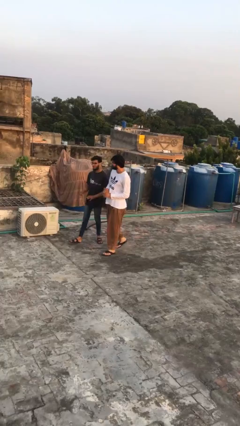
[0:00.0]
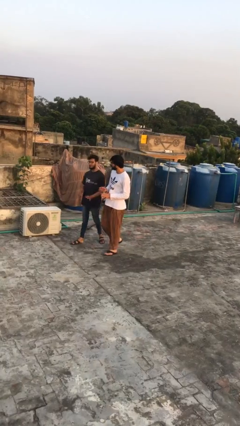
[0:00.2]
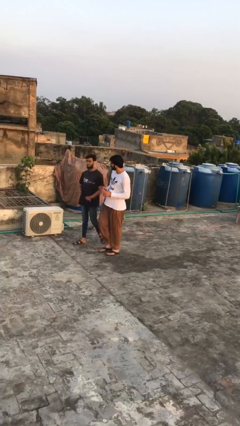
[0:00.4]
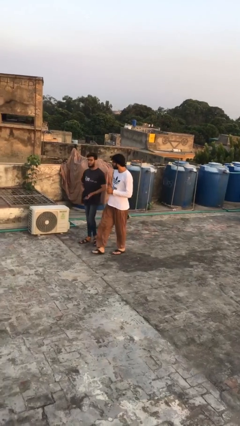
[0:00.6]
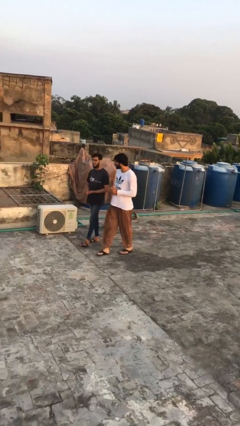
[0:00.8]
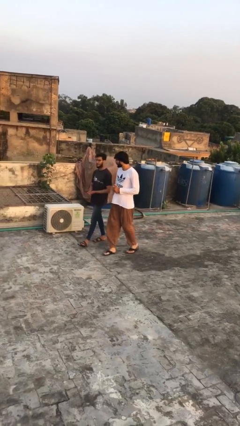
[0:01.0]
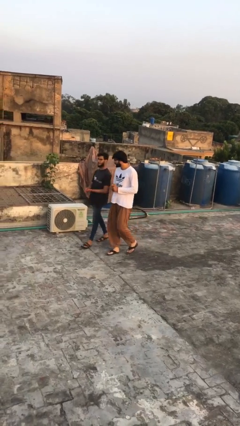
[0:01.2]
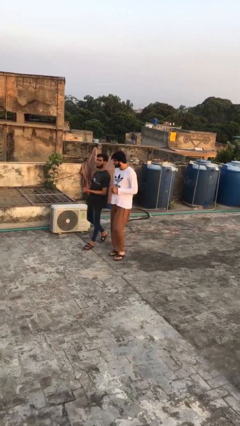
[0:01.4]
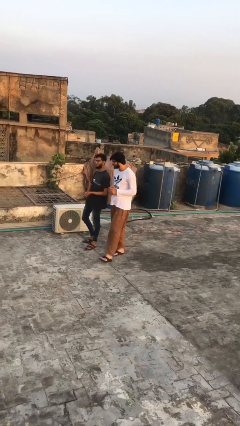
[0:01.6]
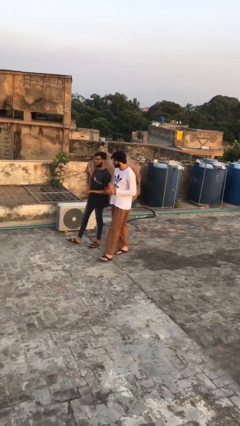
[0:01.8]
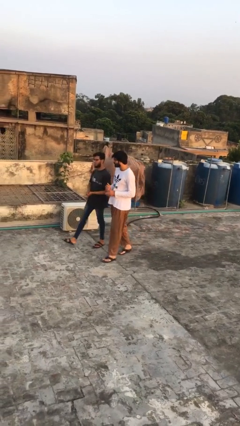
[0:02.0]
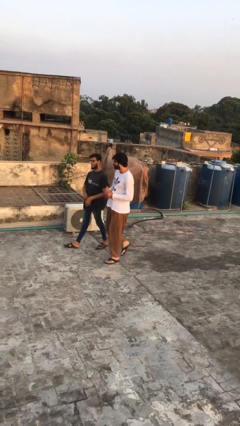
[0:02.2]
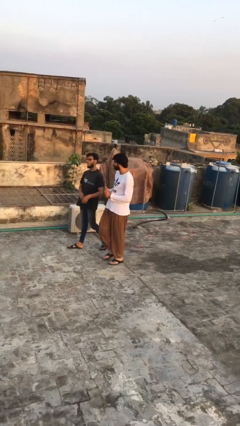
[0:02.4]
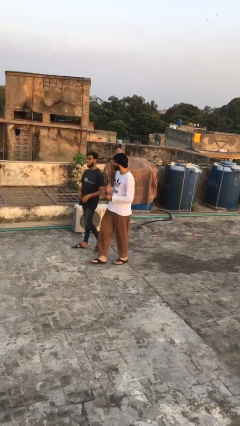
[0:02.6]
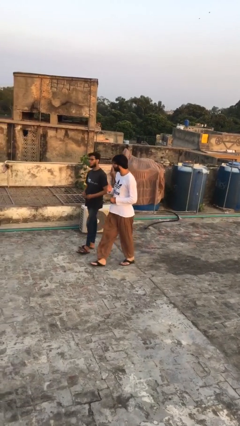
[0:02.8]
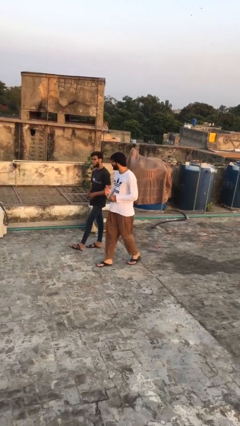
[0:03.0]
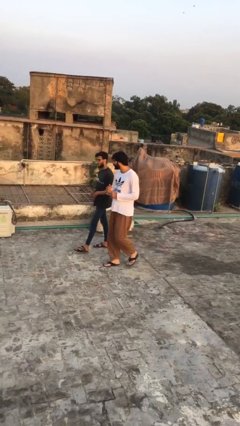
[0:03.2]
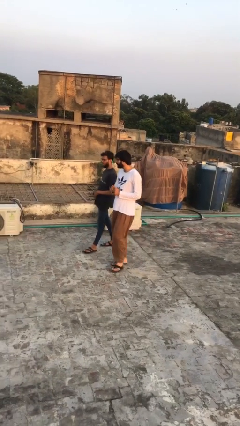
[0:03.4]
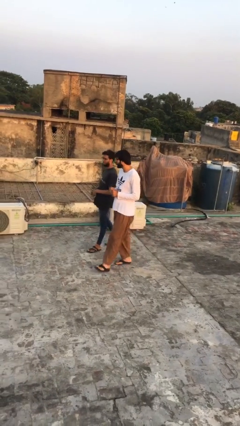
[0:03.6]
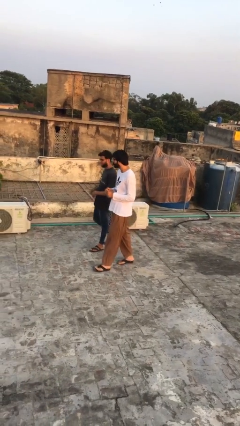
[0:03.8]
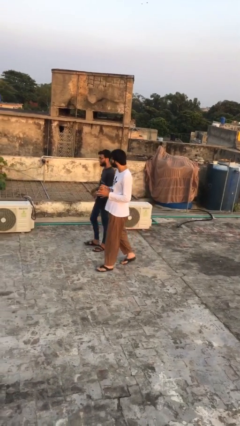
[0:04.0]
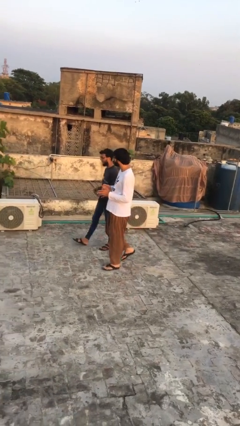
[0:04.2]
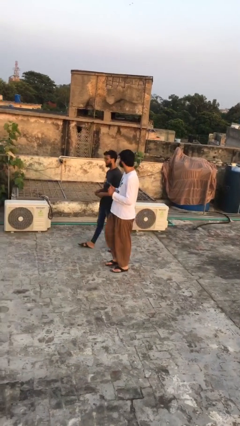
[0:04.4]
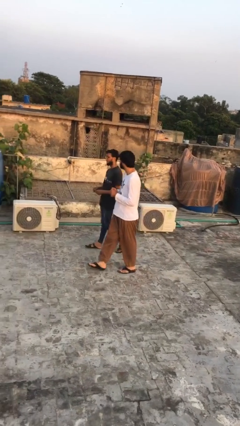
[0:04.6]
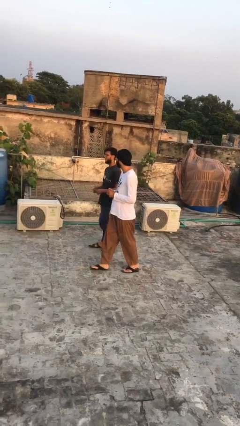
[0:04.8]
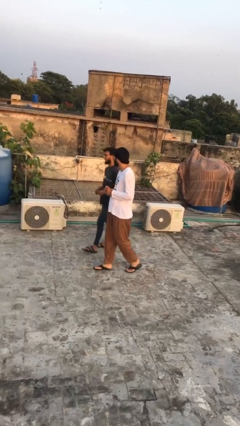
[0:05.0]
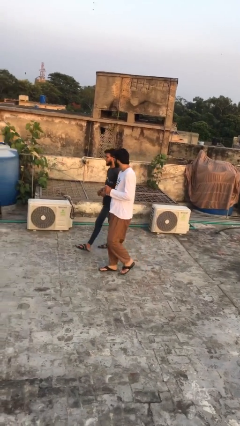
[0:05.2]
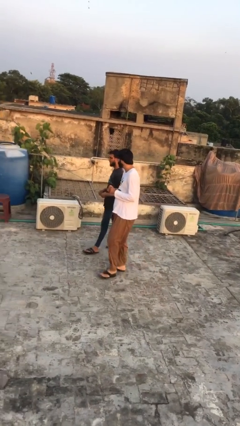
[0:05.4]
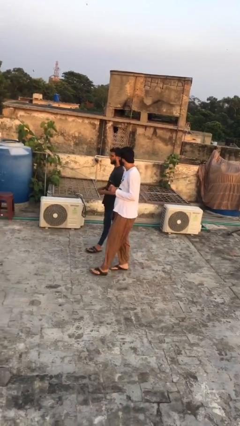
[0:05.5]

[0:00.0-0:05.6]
person talks to person

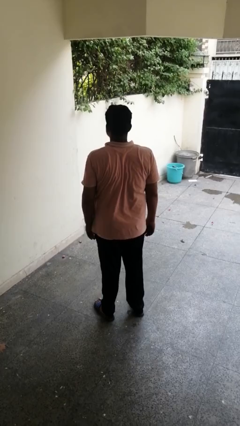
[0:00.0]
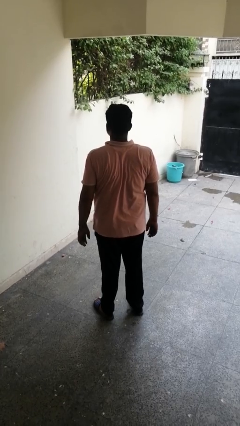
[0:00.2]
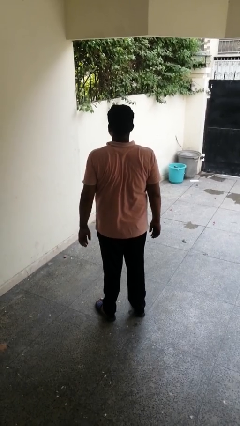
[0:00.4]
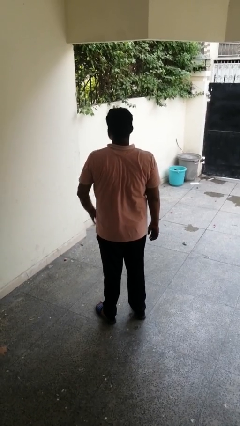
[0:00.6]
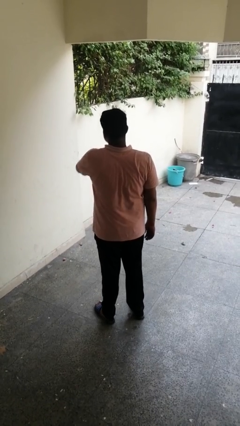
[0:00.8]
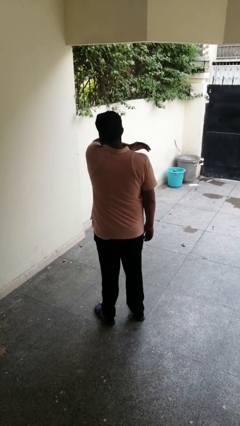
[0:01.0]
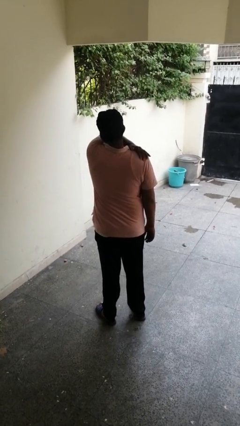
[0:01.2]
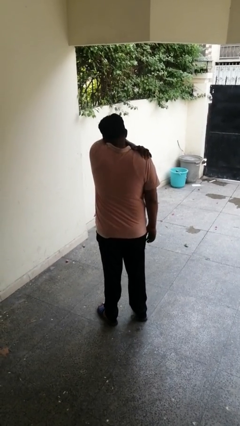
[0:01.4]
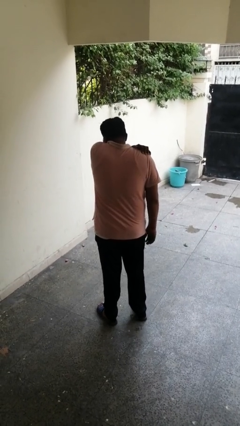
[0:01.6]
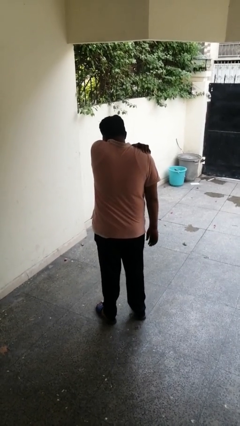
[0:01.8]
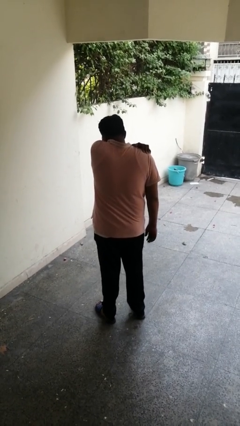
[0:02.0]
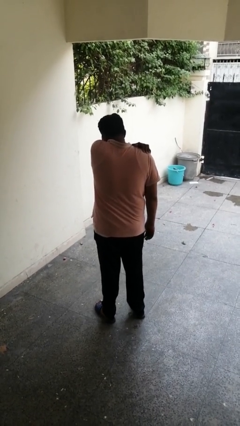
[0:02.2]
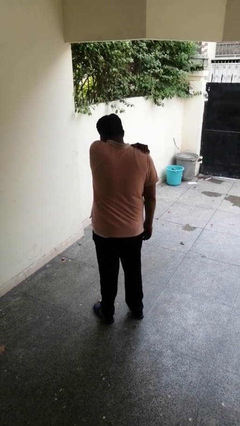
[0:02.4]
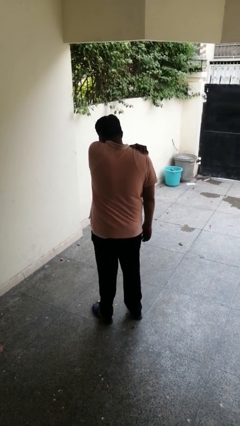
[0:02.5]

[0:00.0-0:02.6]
person sneezes into arm

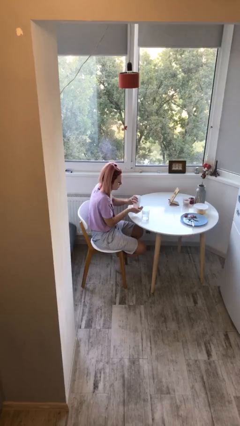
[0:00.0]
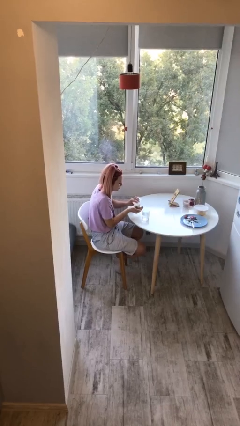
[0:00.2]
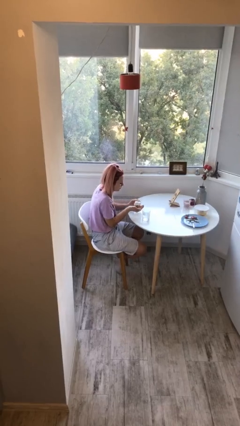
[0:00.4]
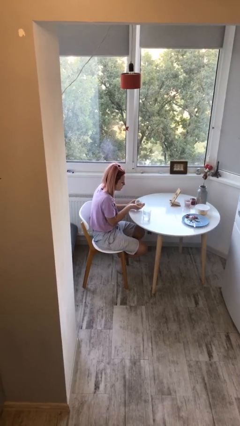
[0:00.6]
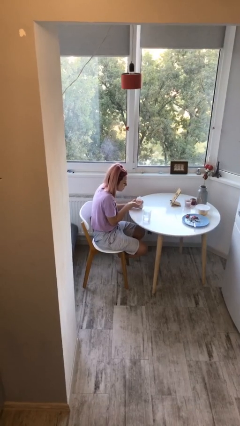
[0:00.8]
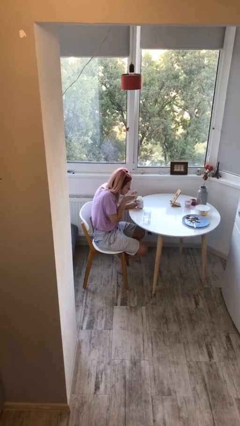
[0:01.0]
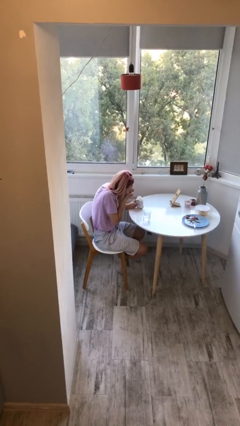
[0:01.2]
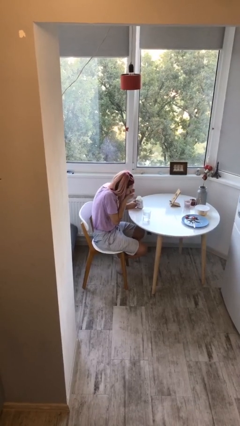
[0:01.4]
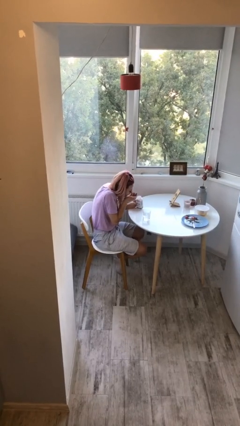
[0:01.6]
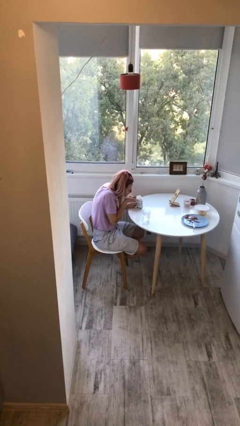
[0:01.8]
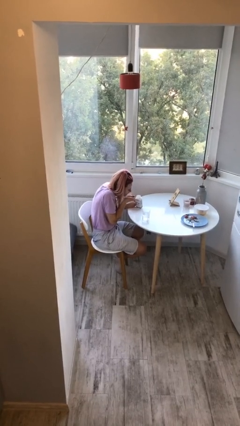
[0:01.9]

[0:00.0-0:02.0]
person takes medicine pills

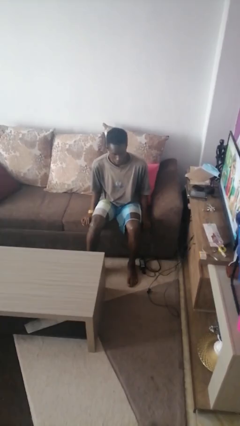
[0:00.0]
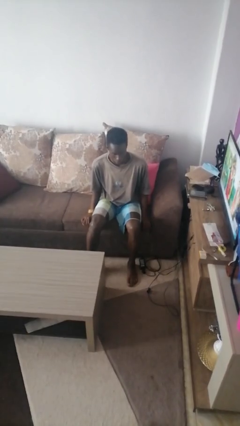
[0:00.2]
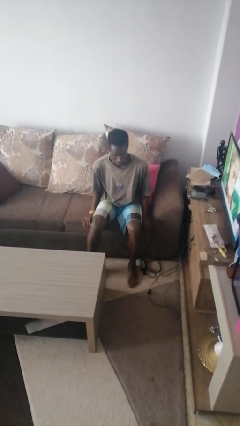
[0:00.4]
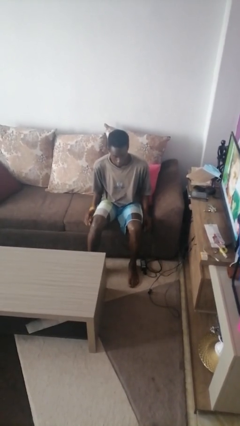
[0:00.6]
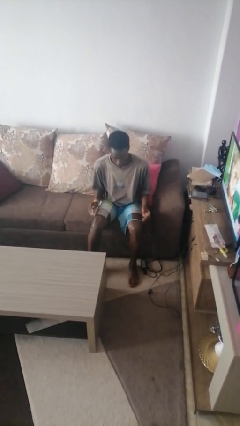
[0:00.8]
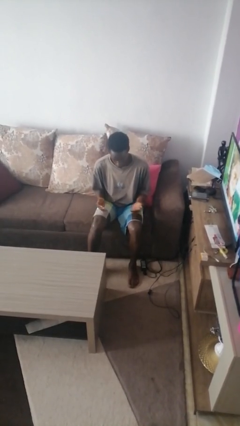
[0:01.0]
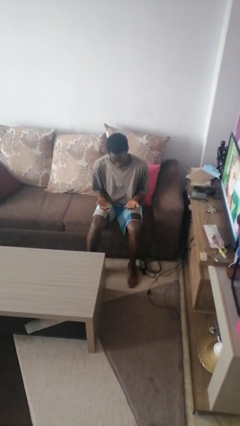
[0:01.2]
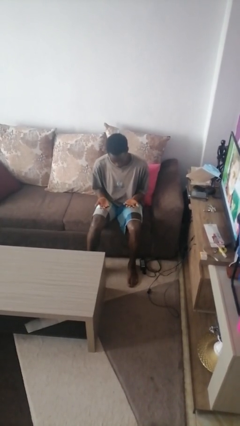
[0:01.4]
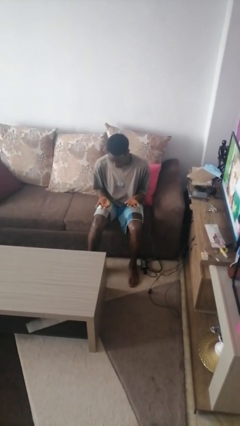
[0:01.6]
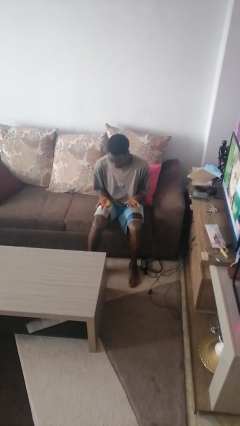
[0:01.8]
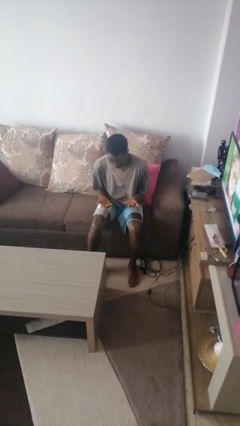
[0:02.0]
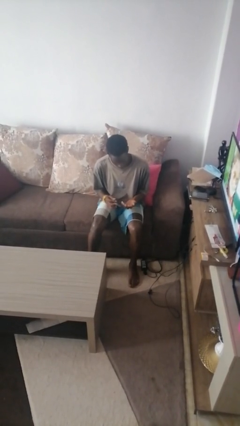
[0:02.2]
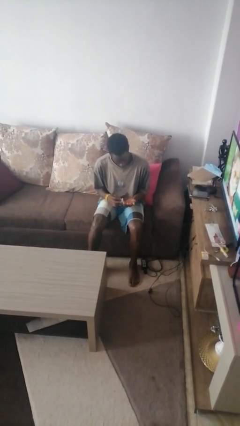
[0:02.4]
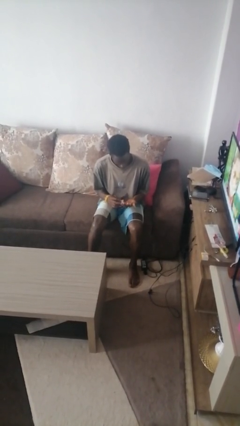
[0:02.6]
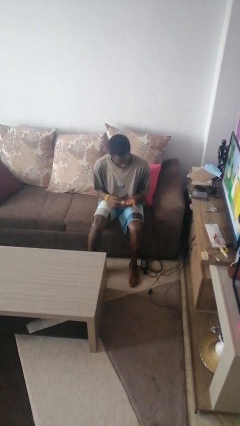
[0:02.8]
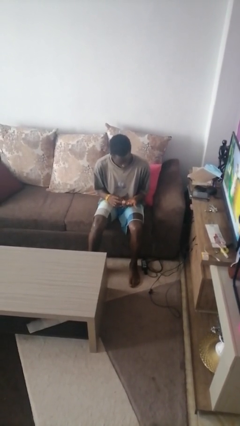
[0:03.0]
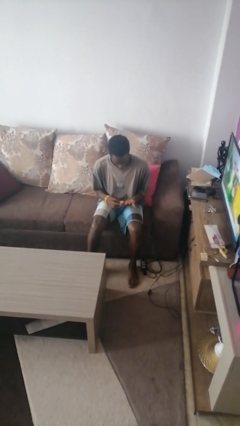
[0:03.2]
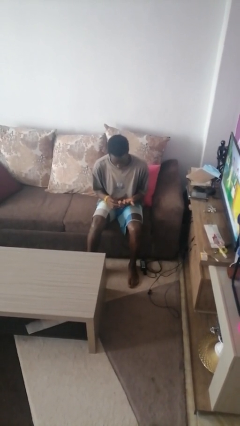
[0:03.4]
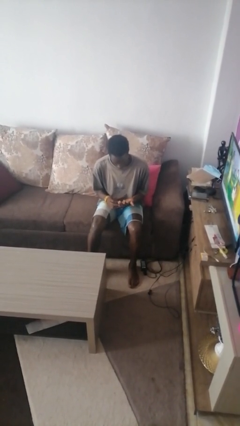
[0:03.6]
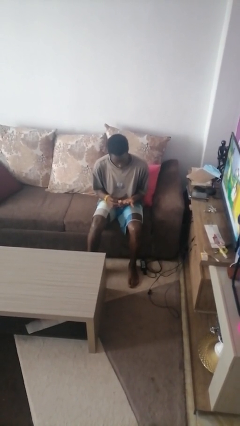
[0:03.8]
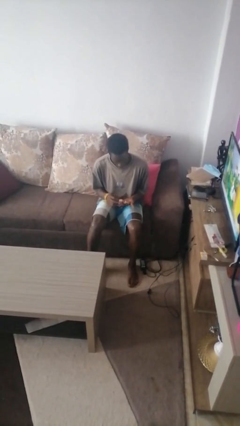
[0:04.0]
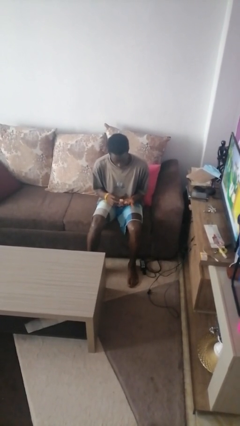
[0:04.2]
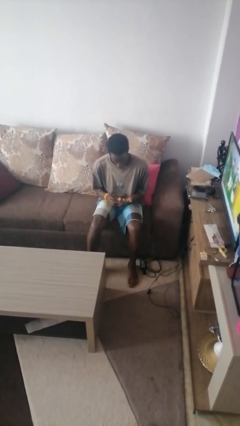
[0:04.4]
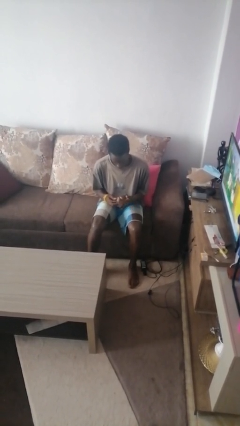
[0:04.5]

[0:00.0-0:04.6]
person looks at hands in lap

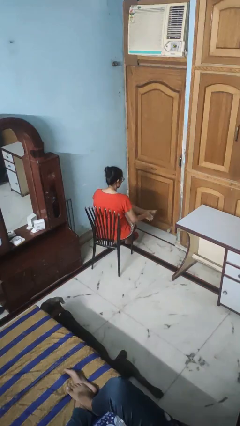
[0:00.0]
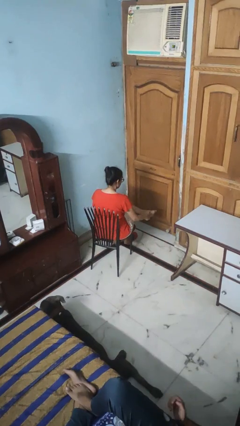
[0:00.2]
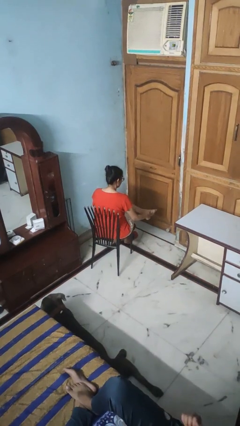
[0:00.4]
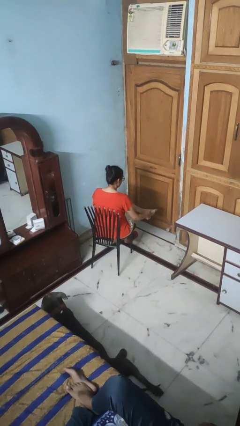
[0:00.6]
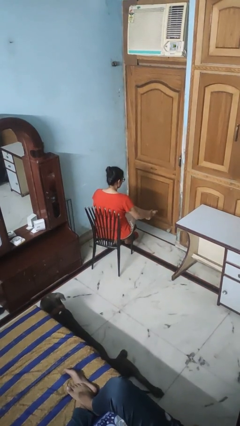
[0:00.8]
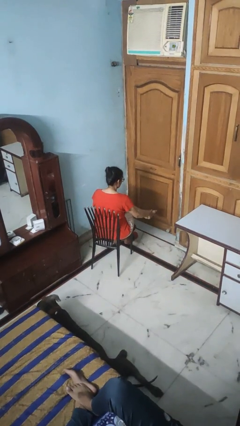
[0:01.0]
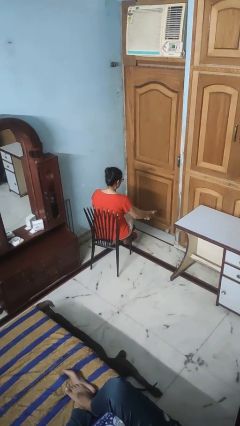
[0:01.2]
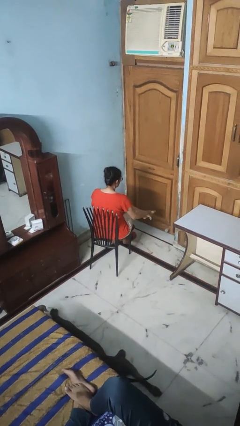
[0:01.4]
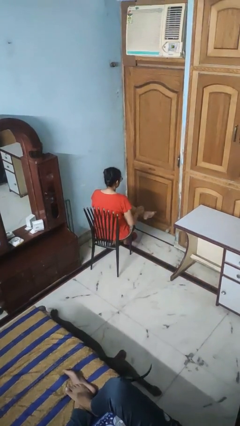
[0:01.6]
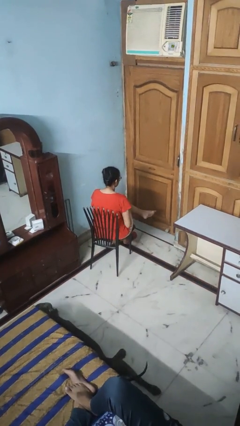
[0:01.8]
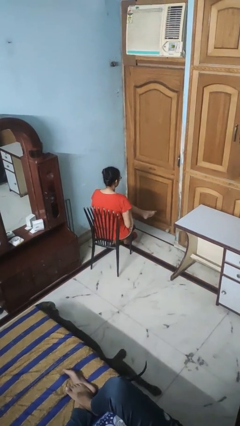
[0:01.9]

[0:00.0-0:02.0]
person rubs foot

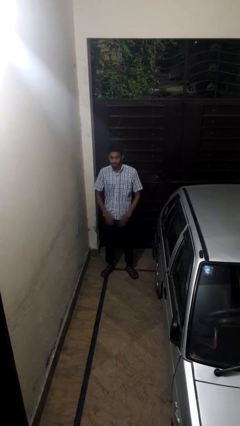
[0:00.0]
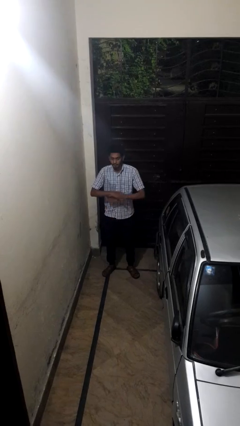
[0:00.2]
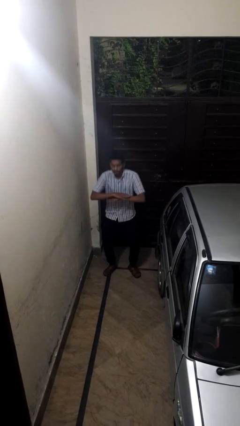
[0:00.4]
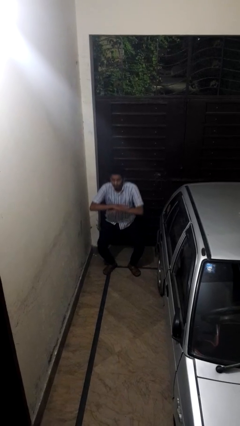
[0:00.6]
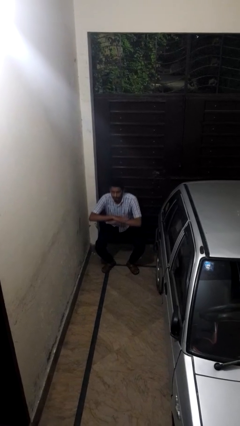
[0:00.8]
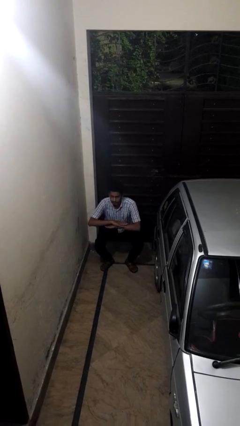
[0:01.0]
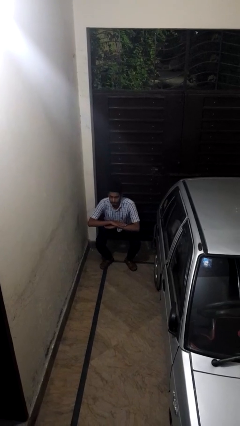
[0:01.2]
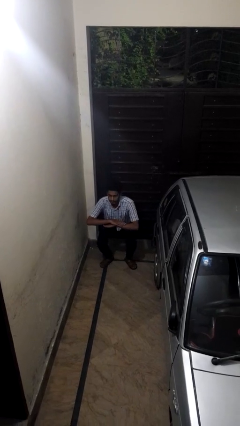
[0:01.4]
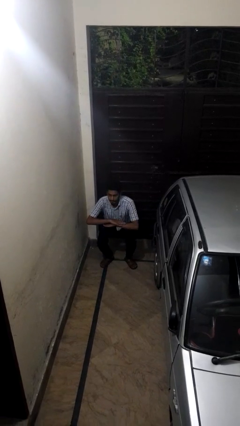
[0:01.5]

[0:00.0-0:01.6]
person squats
